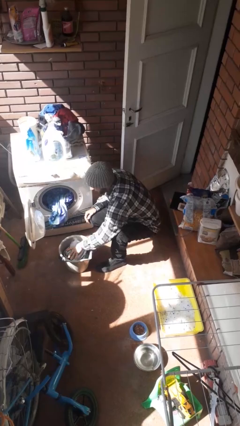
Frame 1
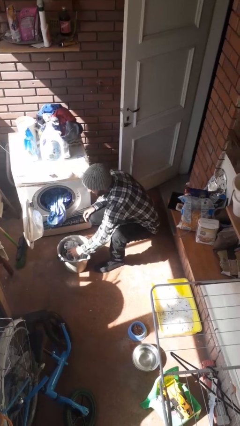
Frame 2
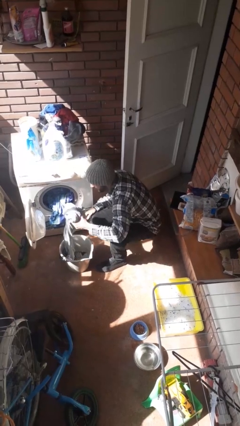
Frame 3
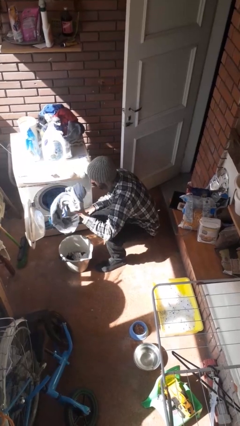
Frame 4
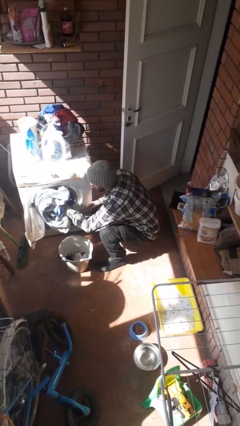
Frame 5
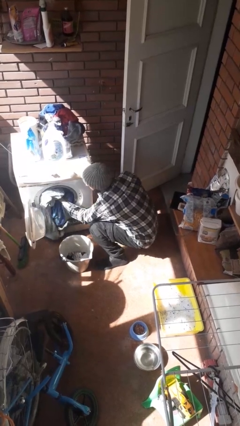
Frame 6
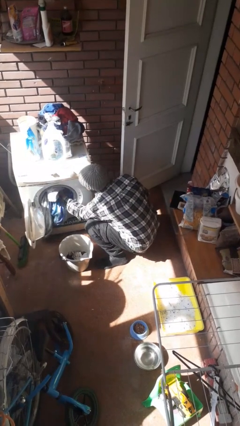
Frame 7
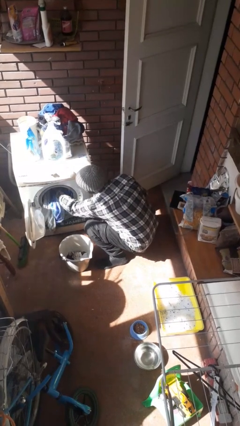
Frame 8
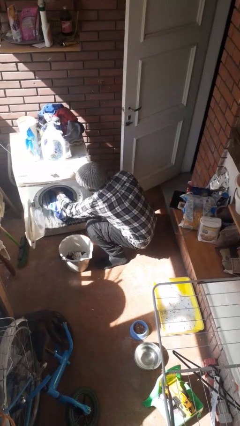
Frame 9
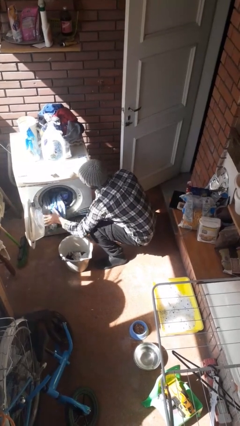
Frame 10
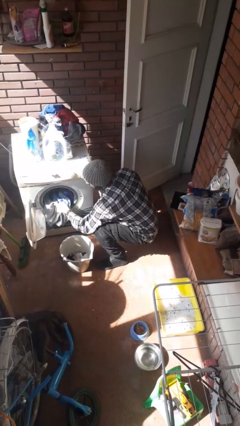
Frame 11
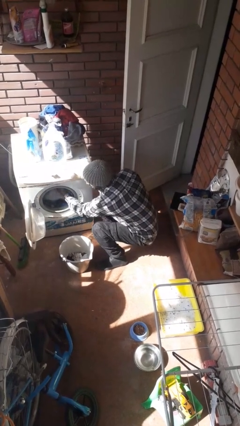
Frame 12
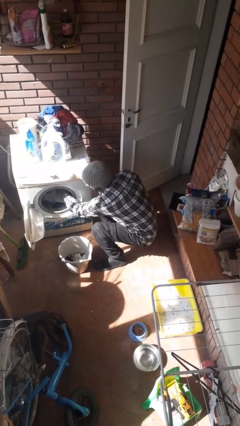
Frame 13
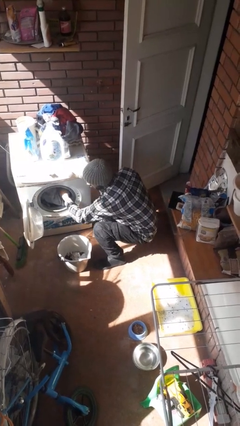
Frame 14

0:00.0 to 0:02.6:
person loads clotheswasher

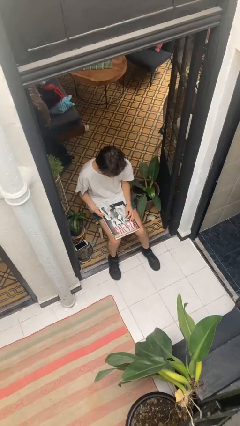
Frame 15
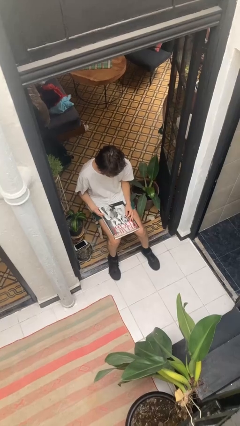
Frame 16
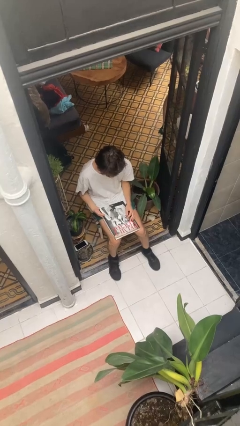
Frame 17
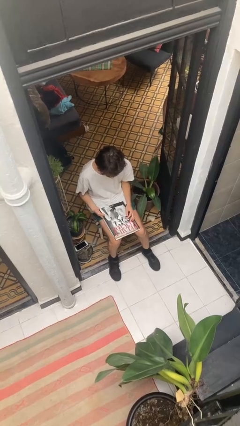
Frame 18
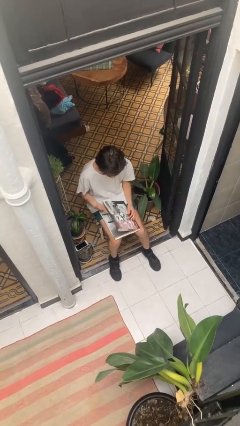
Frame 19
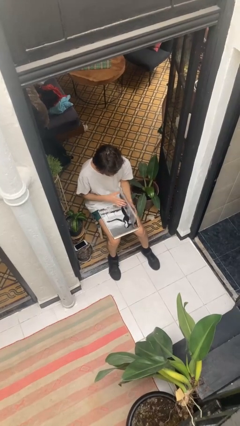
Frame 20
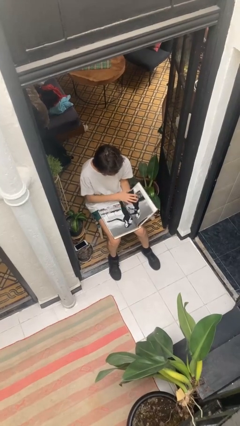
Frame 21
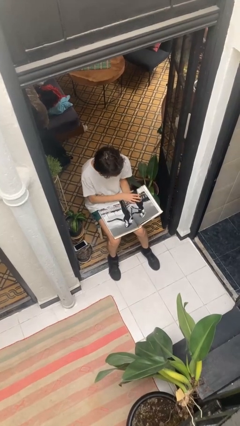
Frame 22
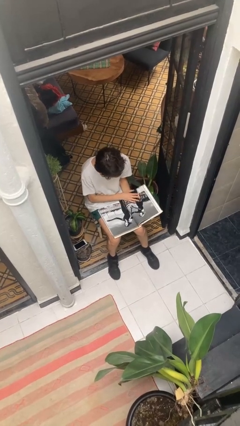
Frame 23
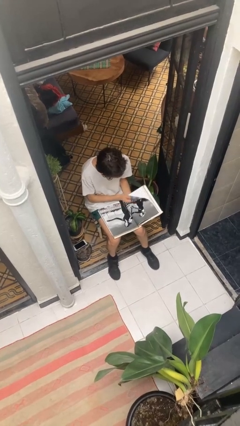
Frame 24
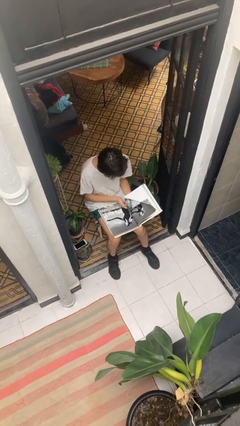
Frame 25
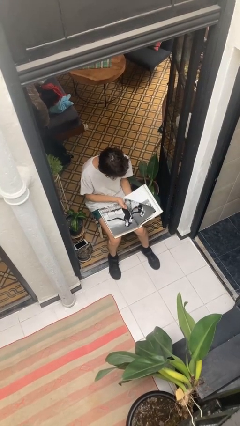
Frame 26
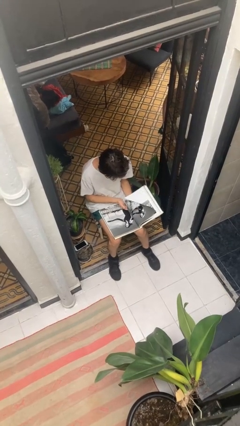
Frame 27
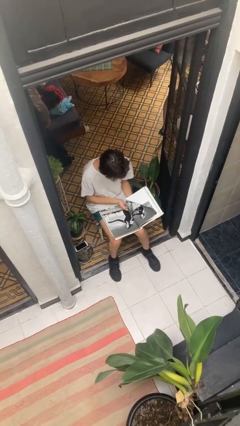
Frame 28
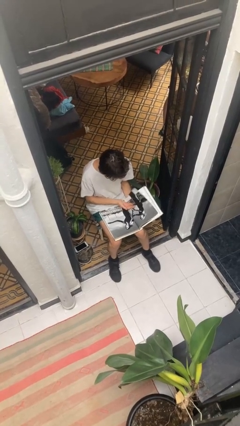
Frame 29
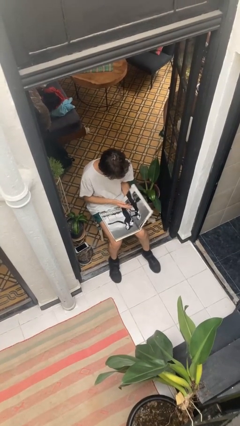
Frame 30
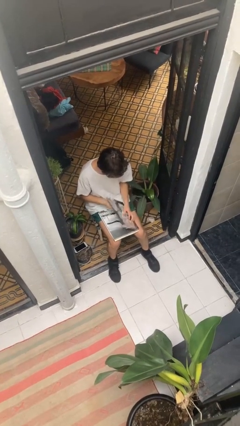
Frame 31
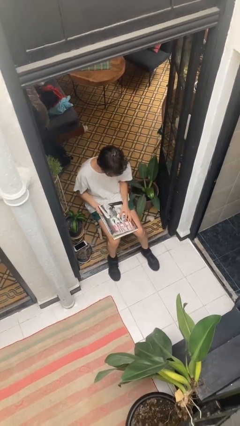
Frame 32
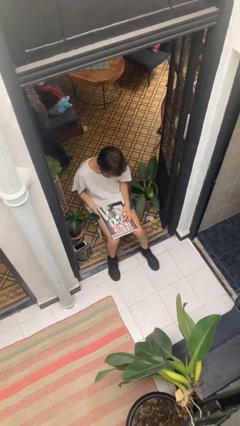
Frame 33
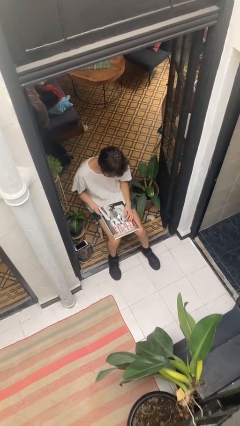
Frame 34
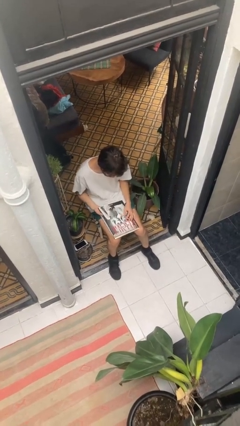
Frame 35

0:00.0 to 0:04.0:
person reads document

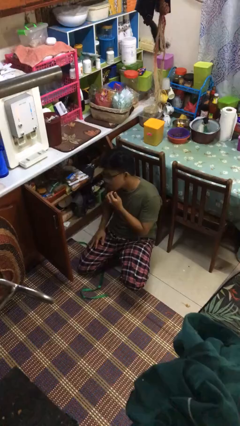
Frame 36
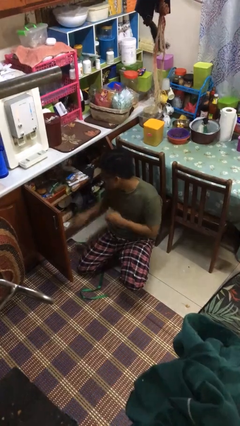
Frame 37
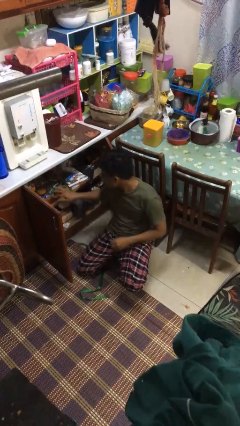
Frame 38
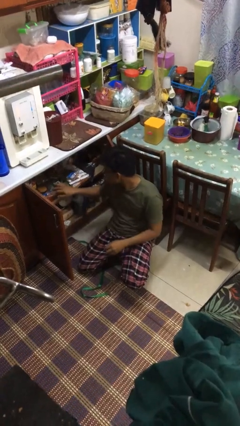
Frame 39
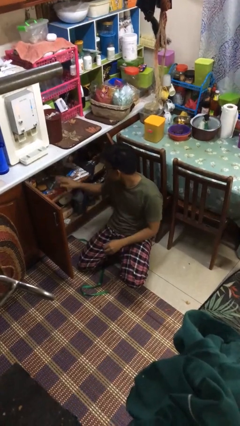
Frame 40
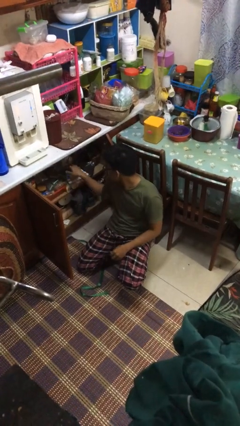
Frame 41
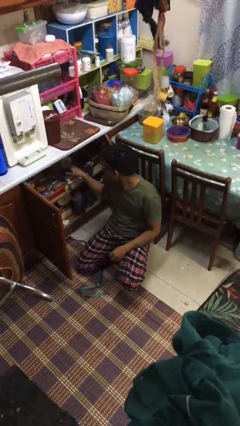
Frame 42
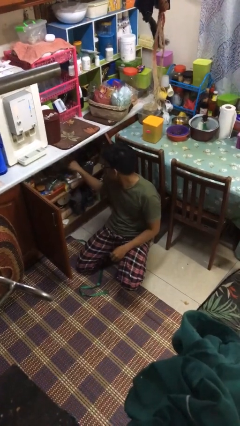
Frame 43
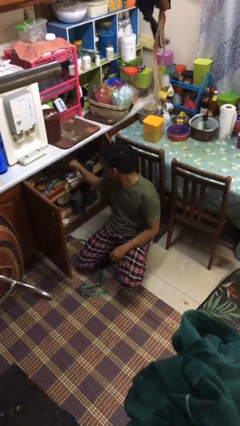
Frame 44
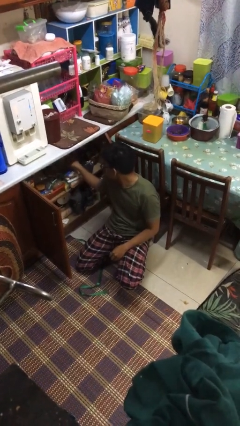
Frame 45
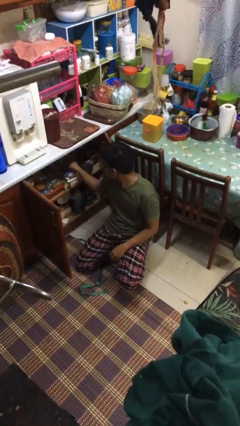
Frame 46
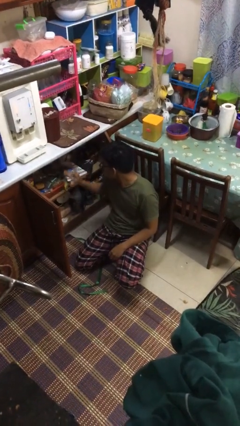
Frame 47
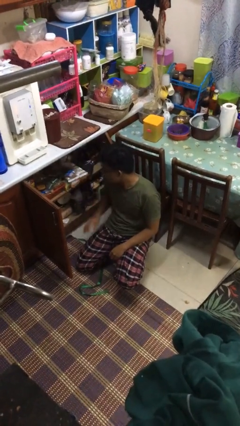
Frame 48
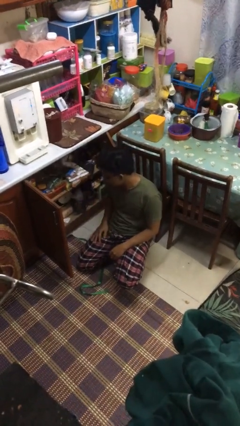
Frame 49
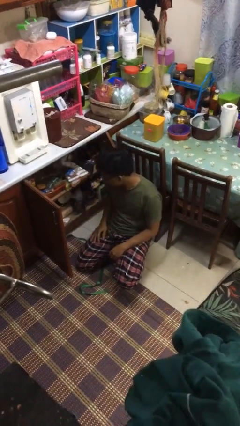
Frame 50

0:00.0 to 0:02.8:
person searches in kitchen drawer

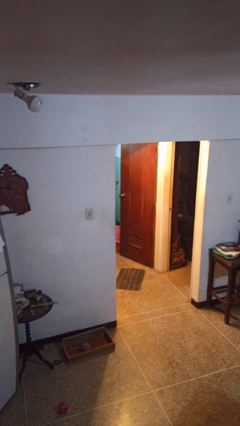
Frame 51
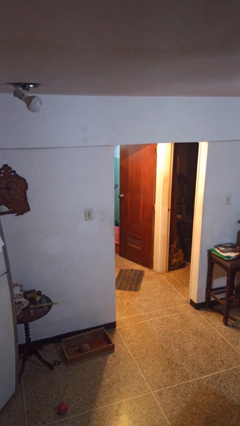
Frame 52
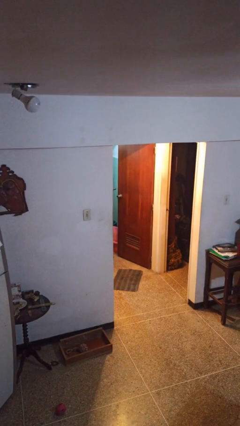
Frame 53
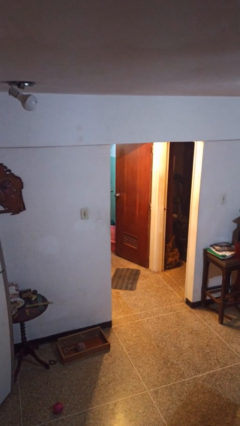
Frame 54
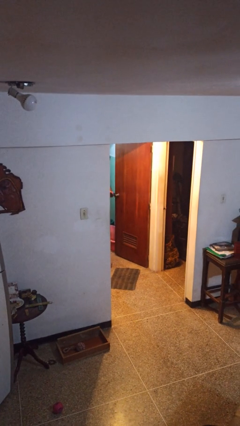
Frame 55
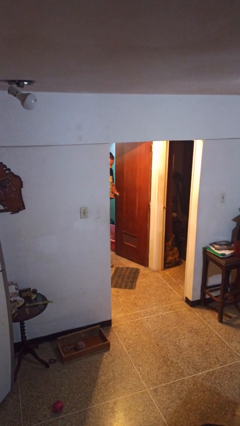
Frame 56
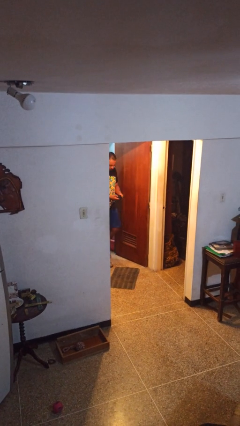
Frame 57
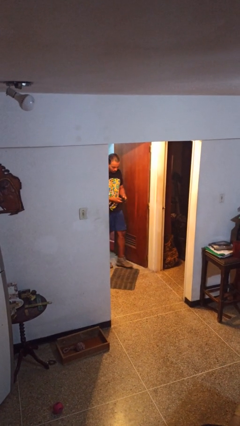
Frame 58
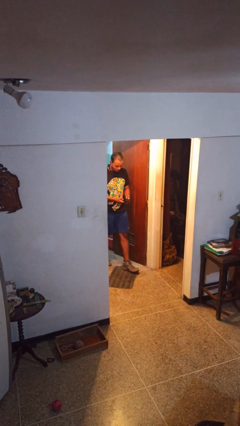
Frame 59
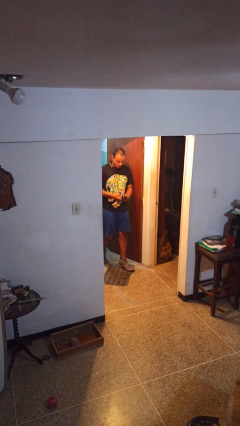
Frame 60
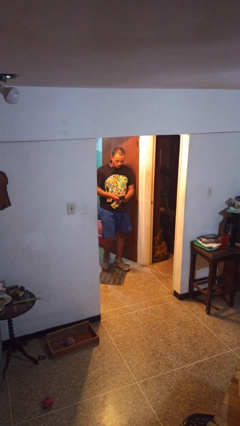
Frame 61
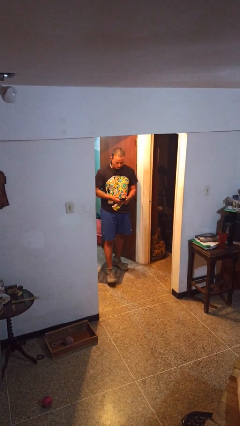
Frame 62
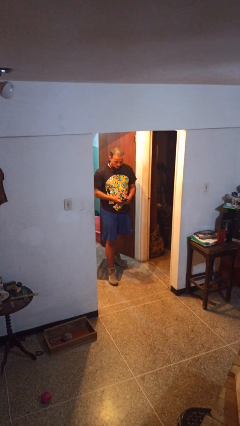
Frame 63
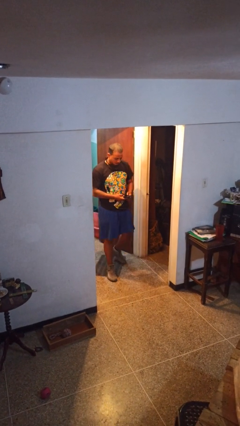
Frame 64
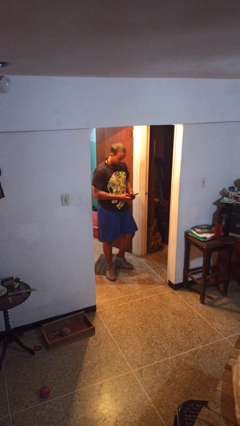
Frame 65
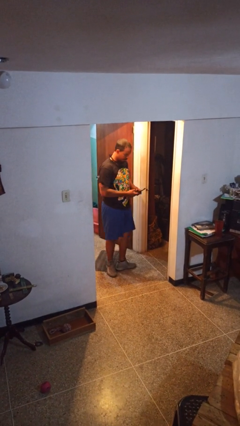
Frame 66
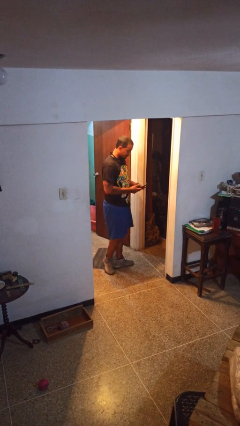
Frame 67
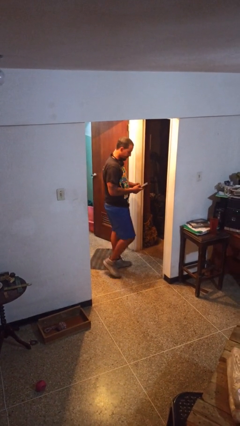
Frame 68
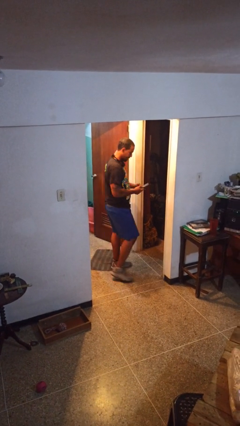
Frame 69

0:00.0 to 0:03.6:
person enters scene through structure

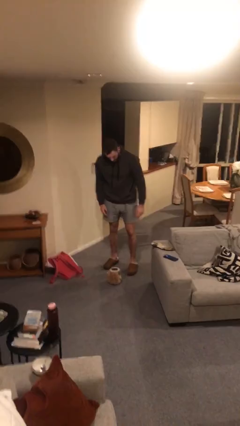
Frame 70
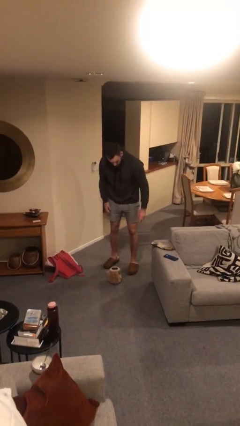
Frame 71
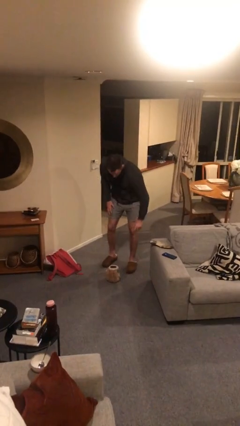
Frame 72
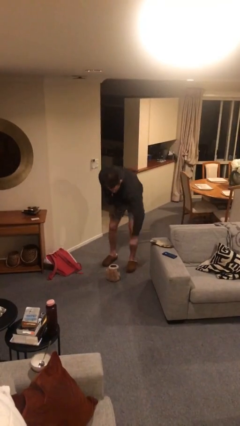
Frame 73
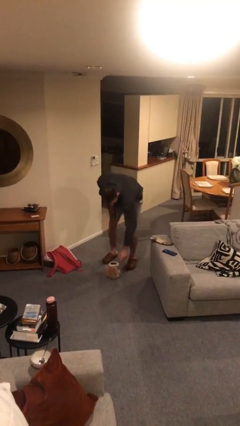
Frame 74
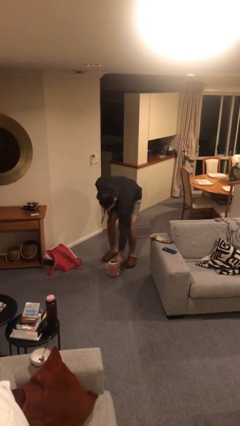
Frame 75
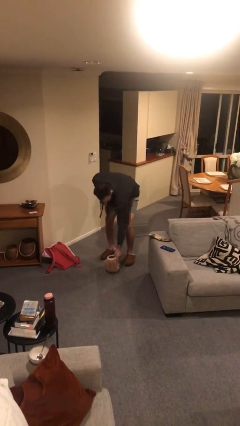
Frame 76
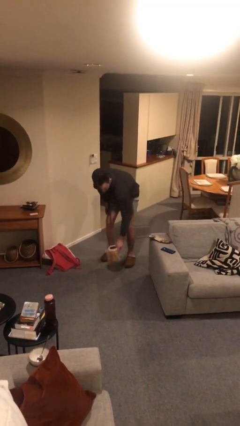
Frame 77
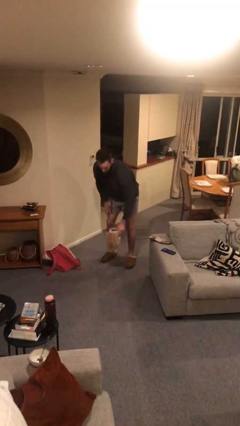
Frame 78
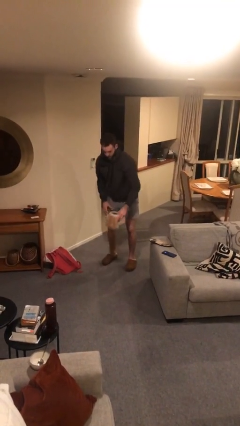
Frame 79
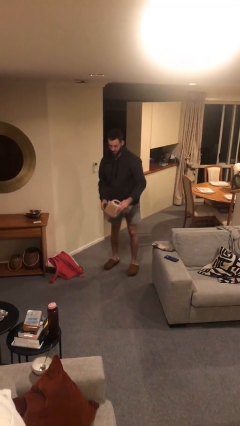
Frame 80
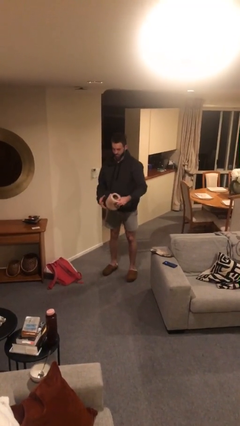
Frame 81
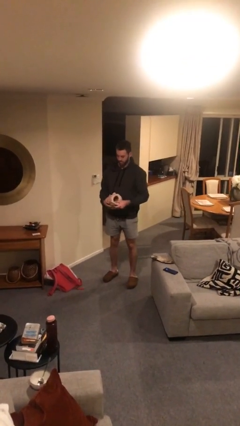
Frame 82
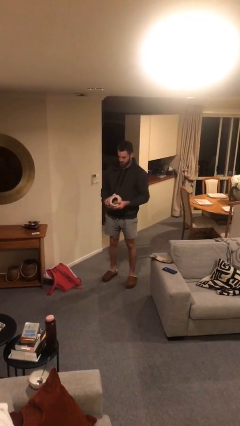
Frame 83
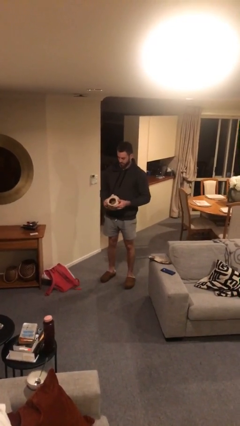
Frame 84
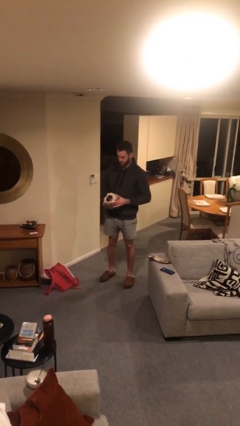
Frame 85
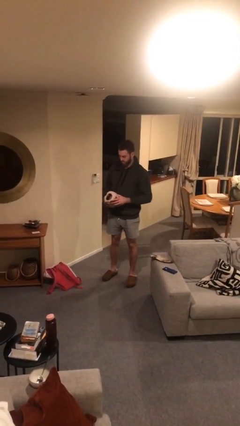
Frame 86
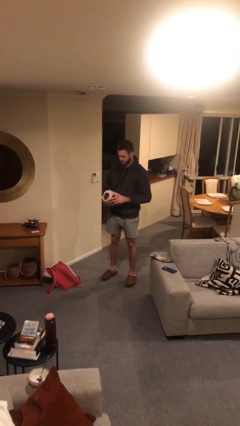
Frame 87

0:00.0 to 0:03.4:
person picks up object from floor

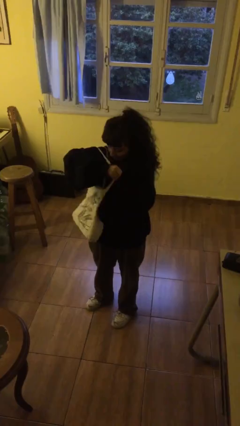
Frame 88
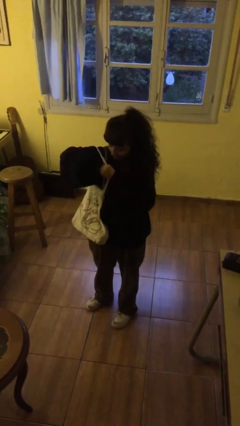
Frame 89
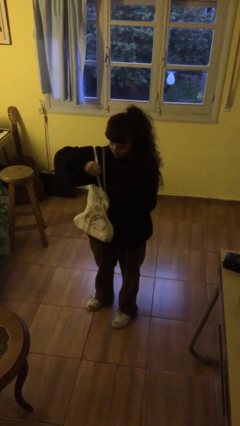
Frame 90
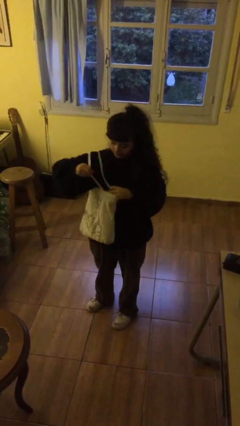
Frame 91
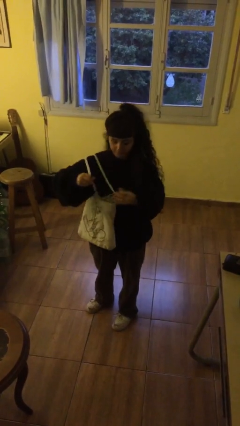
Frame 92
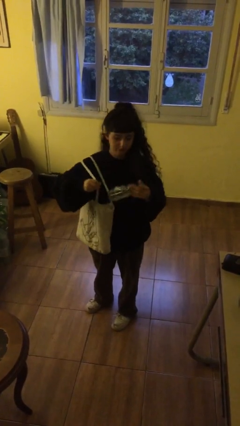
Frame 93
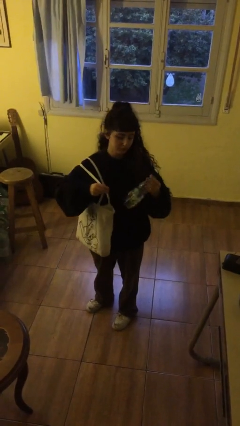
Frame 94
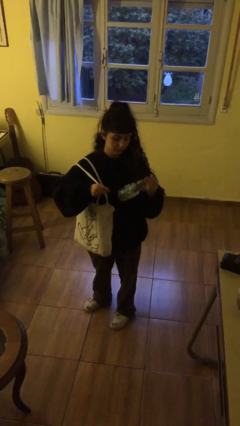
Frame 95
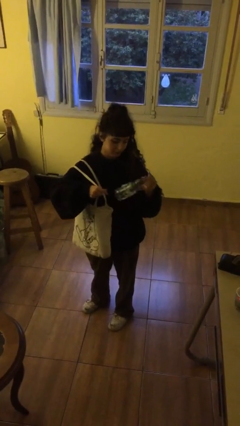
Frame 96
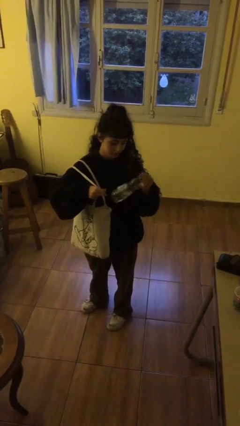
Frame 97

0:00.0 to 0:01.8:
person takes object from purse
